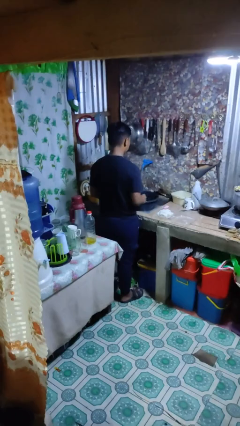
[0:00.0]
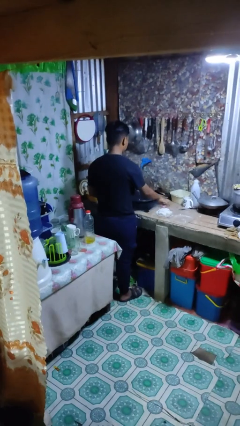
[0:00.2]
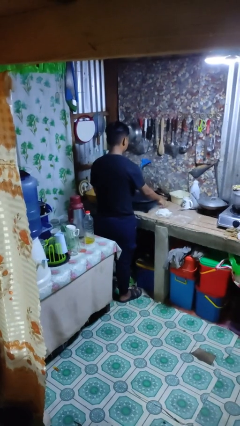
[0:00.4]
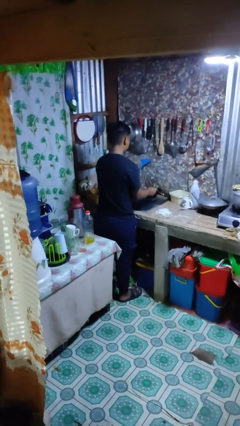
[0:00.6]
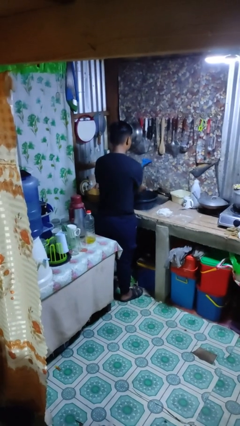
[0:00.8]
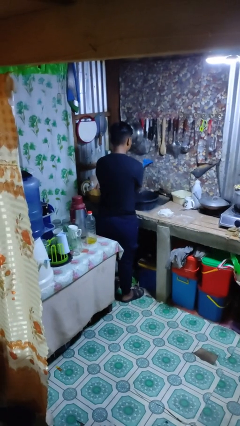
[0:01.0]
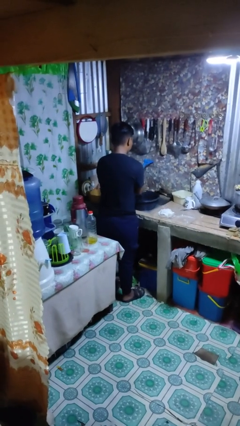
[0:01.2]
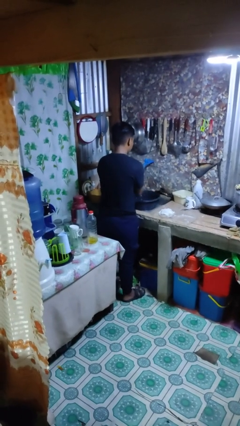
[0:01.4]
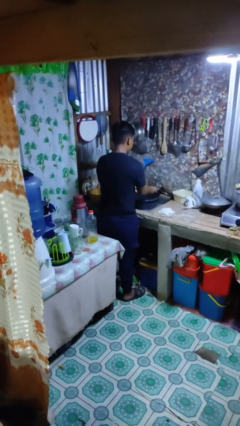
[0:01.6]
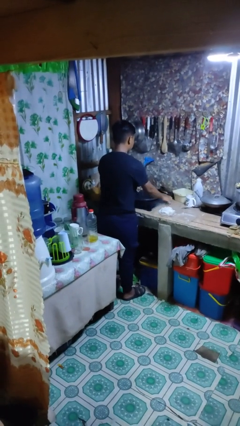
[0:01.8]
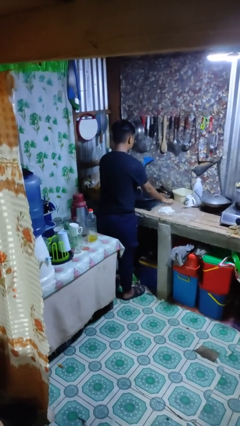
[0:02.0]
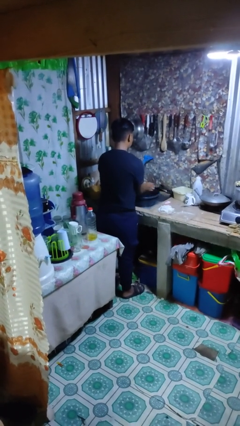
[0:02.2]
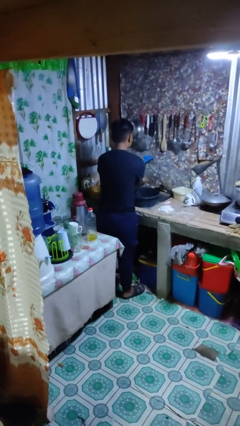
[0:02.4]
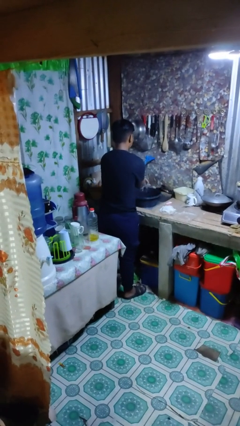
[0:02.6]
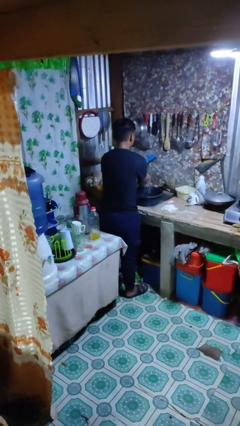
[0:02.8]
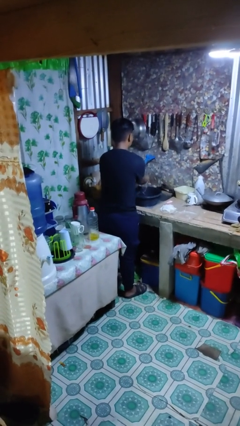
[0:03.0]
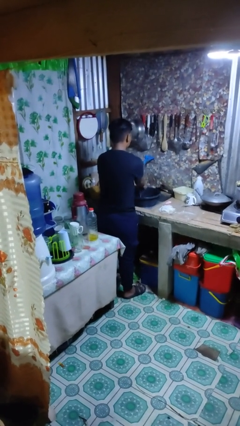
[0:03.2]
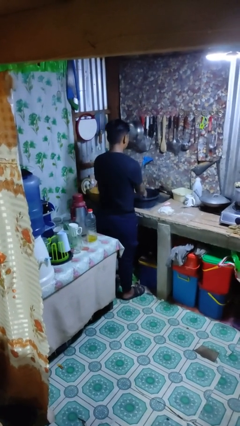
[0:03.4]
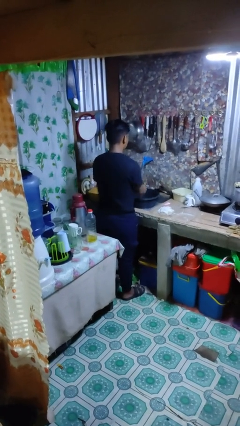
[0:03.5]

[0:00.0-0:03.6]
person washes hands

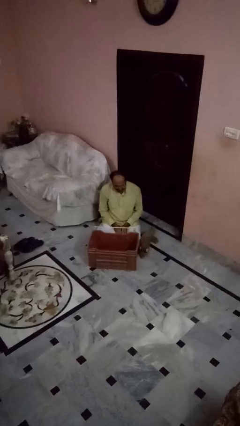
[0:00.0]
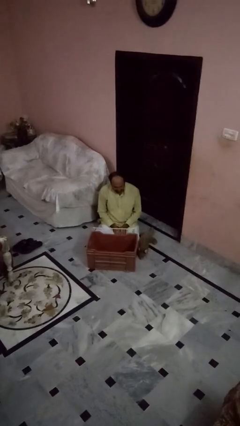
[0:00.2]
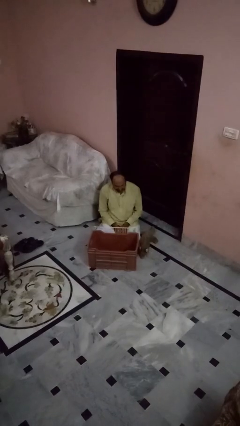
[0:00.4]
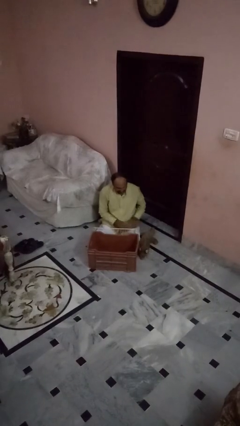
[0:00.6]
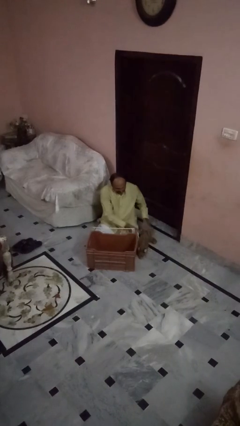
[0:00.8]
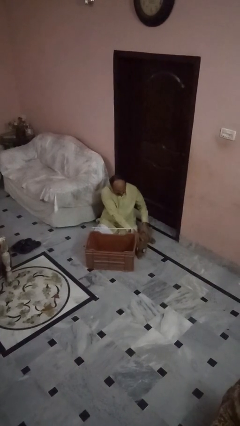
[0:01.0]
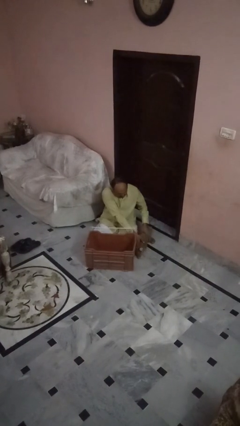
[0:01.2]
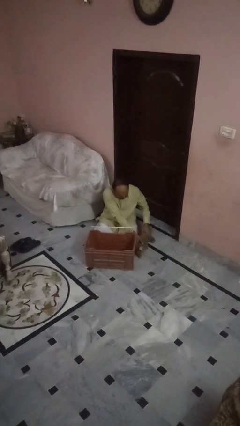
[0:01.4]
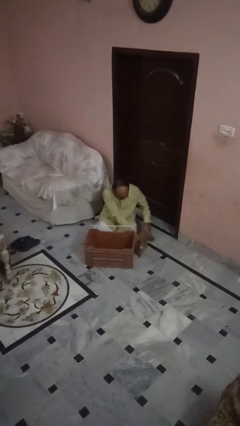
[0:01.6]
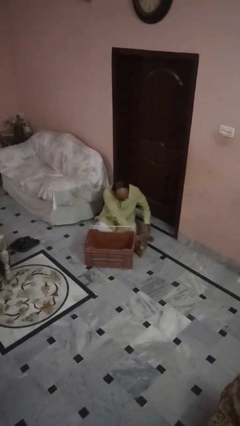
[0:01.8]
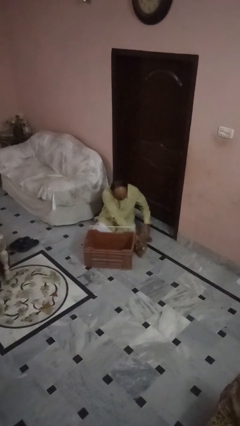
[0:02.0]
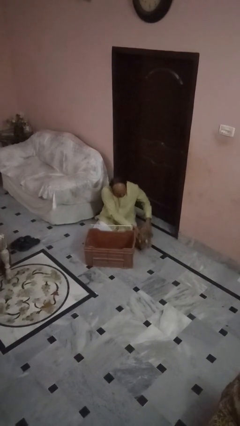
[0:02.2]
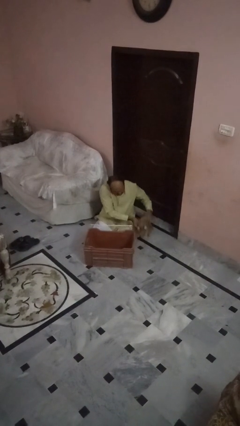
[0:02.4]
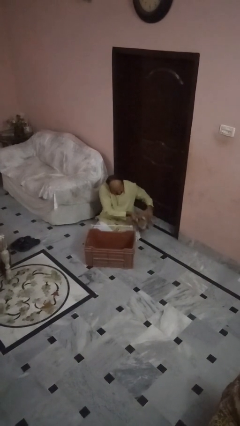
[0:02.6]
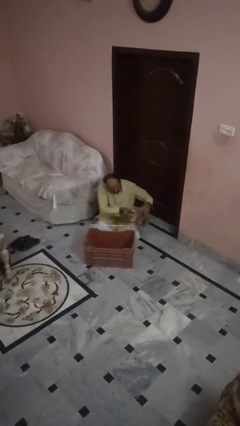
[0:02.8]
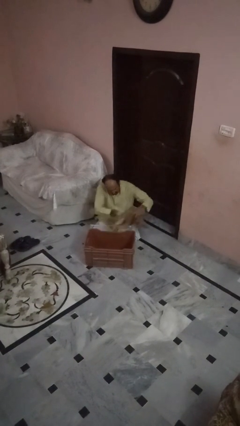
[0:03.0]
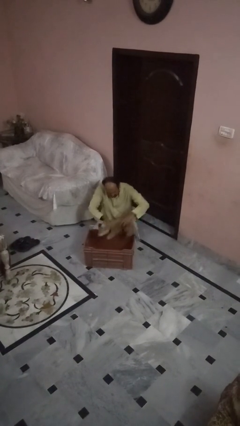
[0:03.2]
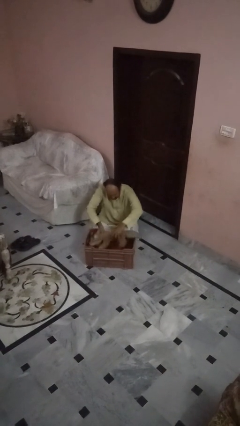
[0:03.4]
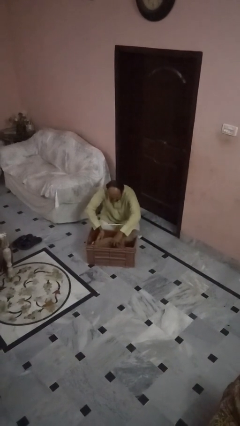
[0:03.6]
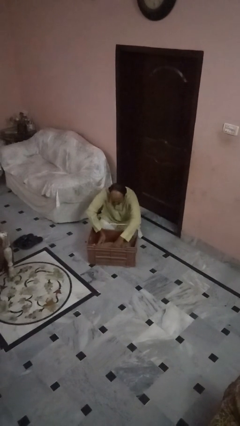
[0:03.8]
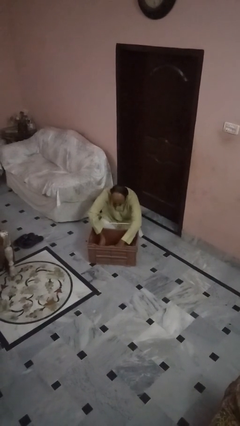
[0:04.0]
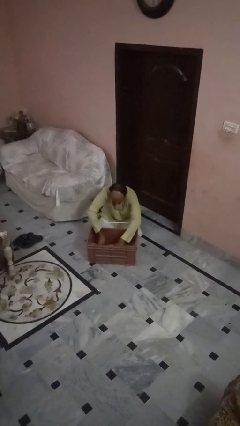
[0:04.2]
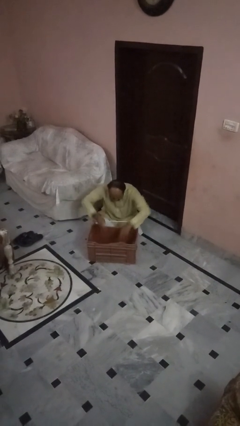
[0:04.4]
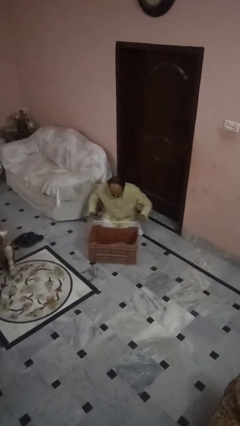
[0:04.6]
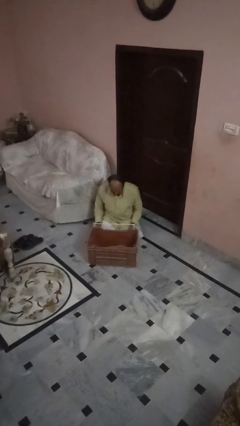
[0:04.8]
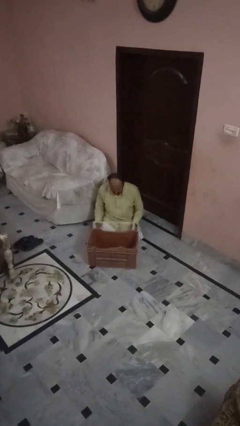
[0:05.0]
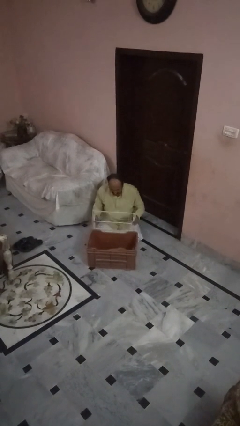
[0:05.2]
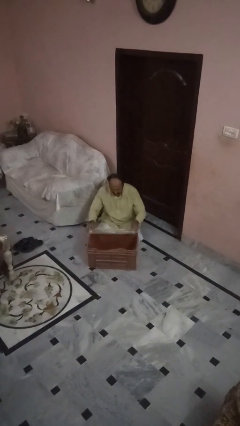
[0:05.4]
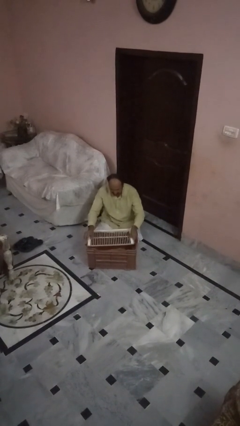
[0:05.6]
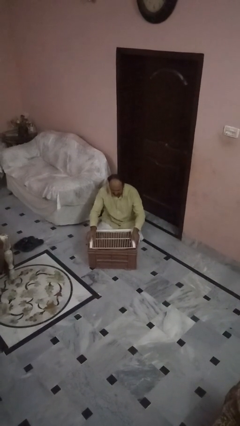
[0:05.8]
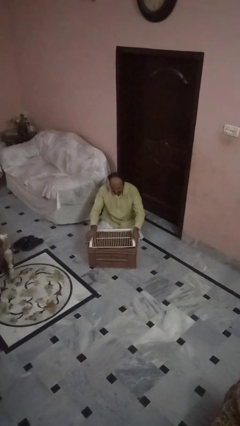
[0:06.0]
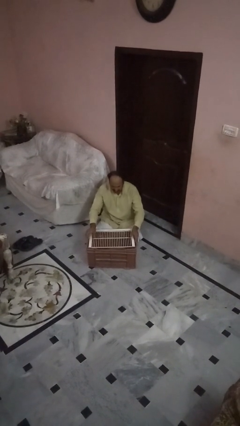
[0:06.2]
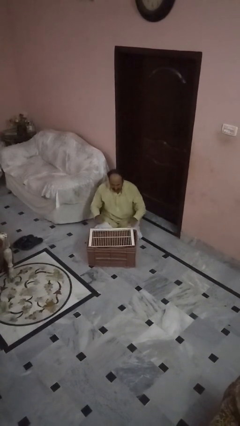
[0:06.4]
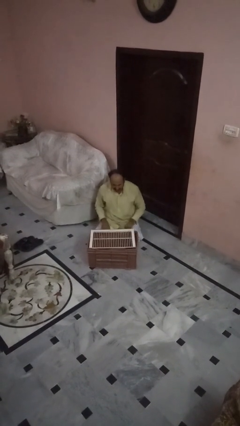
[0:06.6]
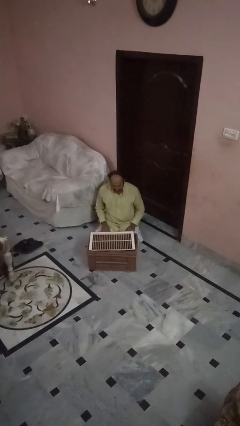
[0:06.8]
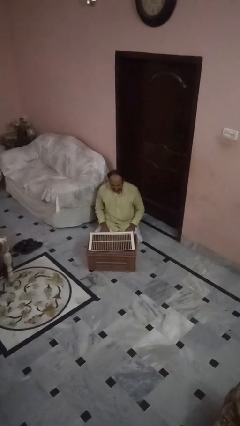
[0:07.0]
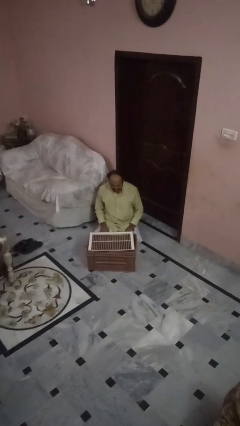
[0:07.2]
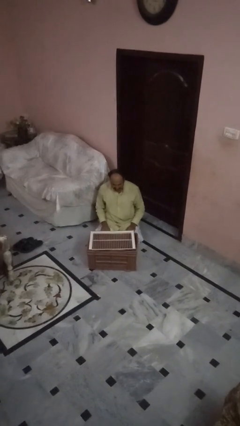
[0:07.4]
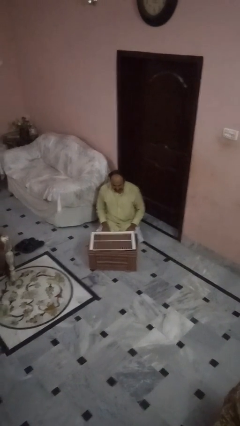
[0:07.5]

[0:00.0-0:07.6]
person crates dog

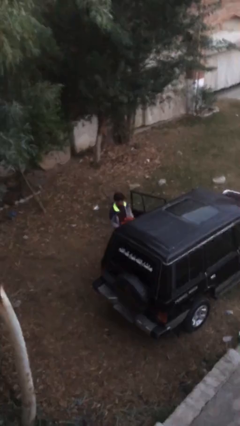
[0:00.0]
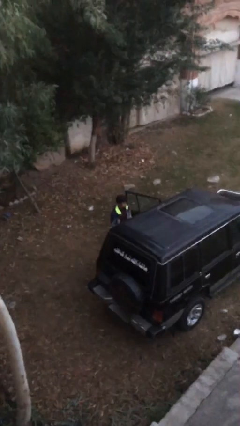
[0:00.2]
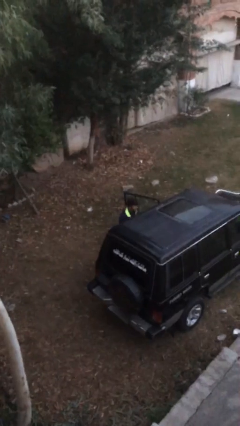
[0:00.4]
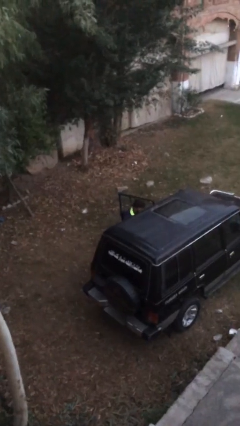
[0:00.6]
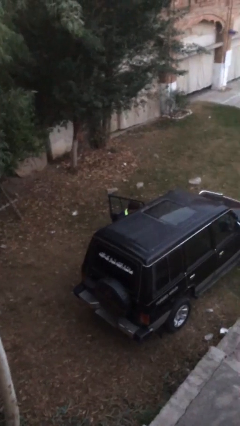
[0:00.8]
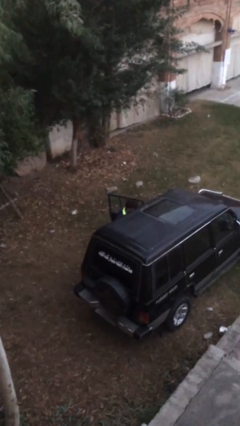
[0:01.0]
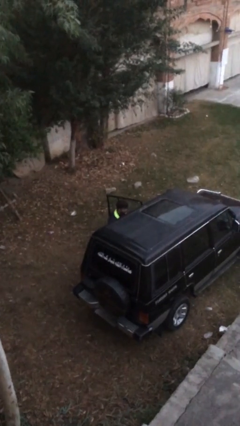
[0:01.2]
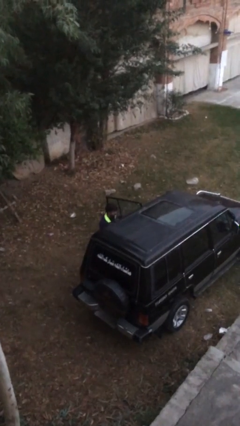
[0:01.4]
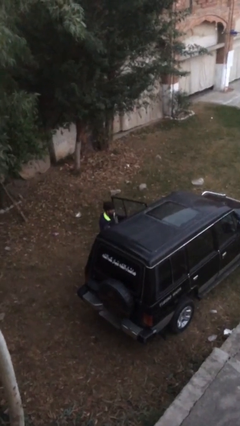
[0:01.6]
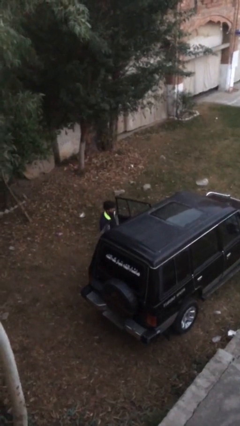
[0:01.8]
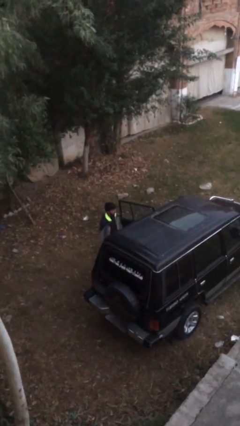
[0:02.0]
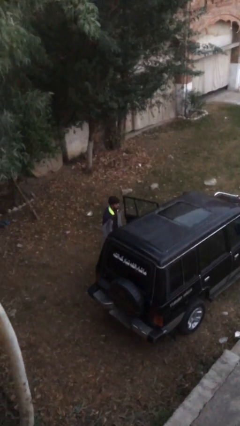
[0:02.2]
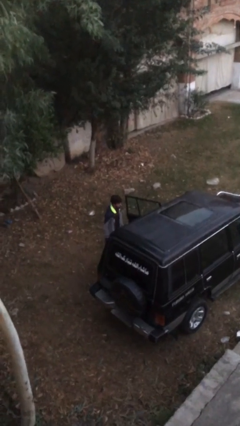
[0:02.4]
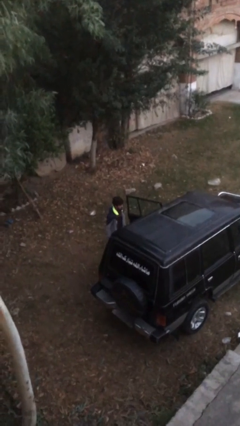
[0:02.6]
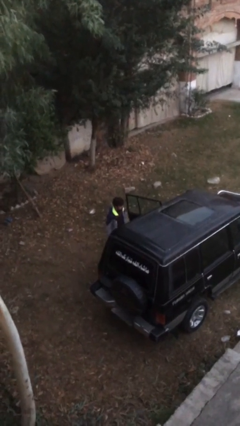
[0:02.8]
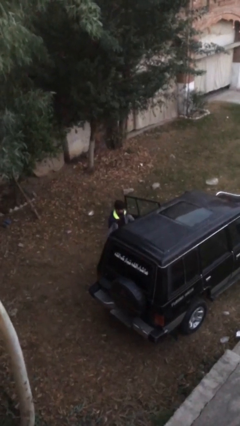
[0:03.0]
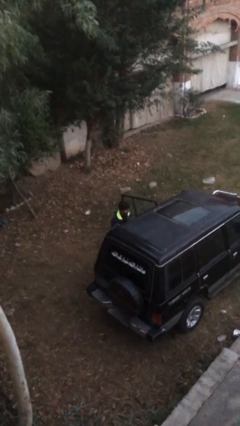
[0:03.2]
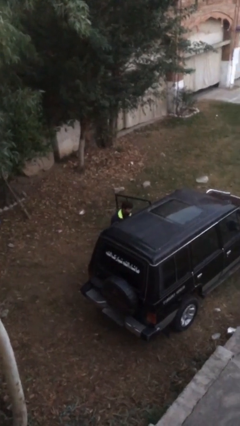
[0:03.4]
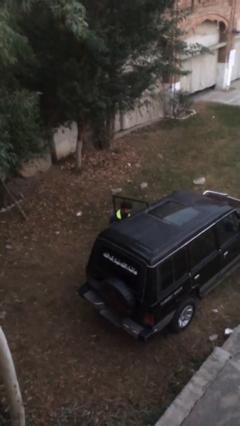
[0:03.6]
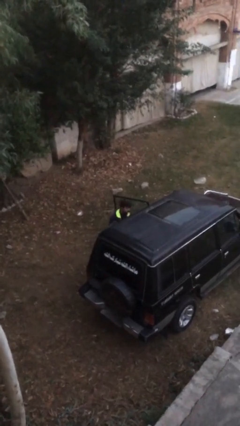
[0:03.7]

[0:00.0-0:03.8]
person loads car

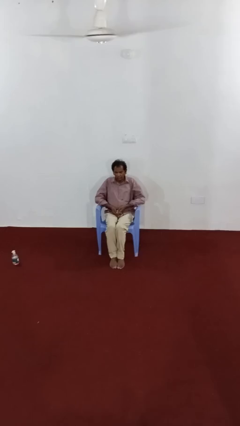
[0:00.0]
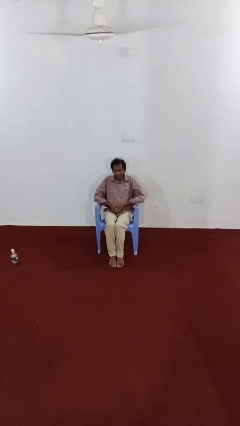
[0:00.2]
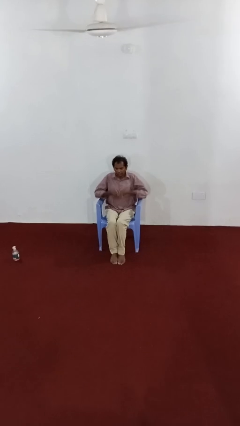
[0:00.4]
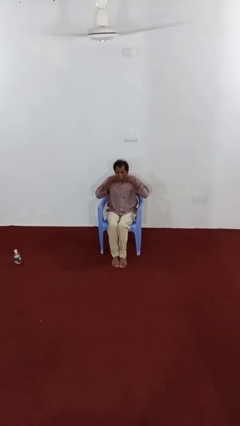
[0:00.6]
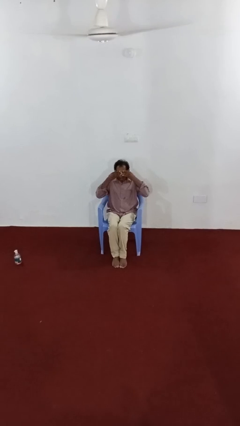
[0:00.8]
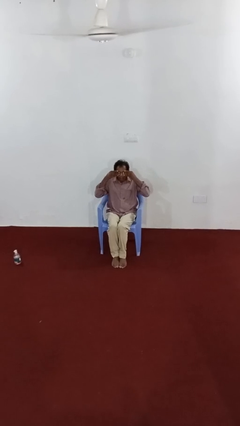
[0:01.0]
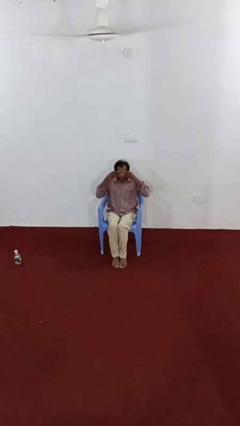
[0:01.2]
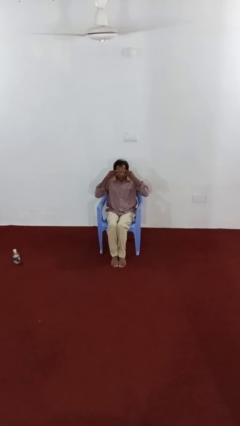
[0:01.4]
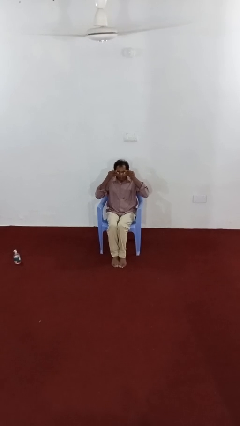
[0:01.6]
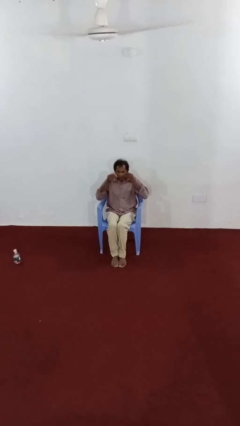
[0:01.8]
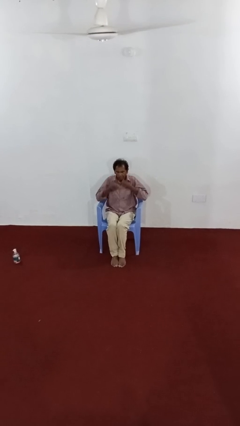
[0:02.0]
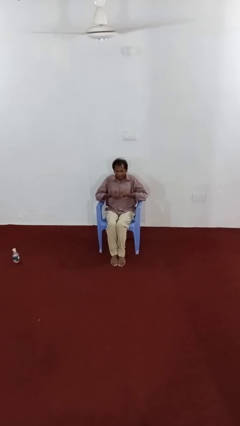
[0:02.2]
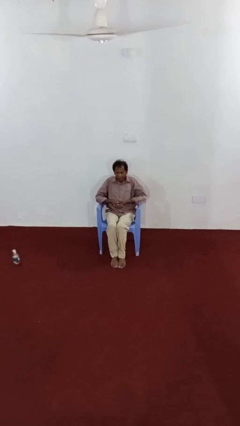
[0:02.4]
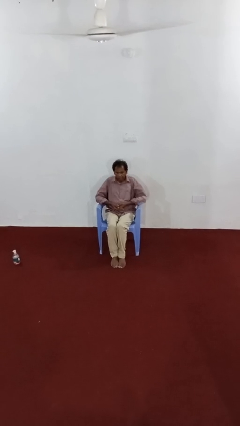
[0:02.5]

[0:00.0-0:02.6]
person rubs eyes
